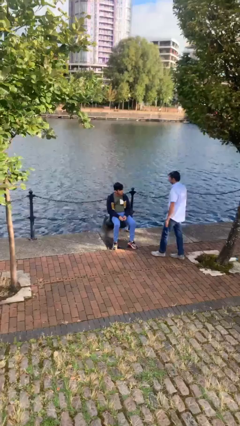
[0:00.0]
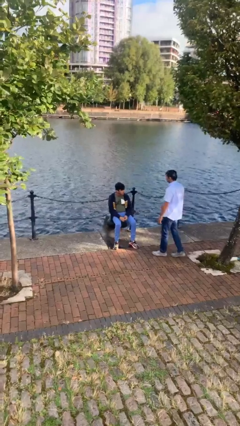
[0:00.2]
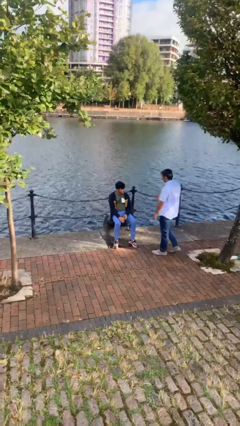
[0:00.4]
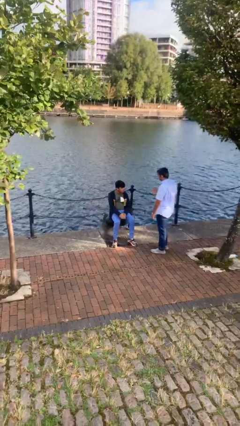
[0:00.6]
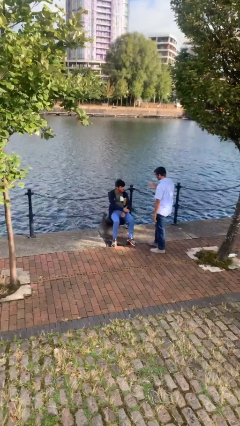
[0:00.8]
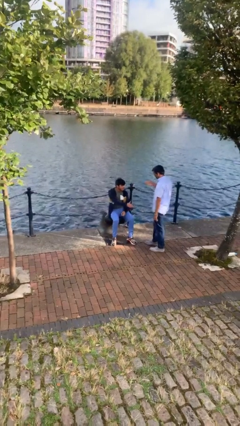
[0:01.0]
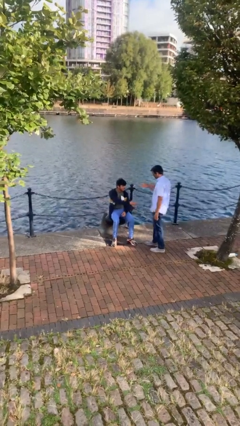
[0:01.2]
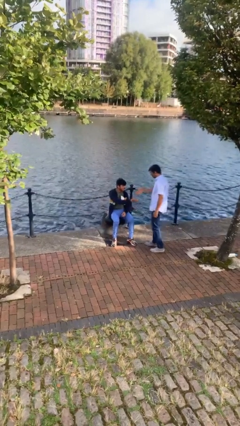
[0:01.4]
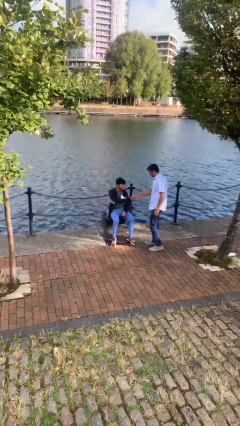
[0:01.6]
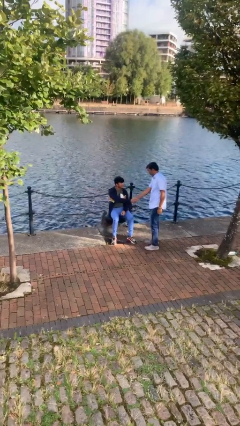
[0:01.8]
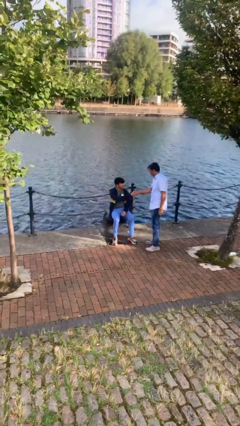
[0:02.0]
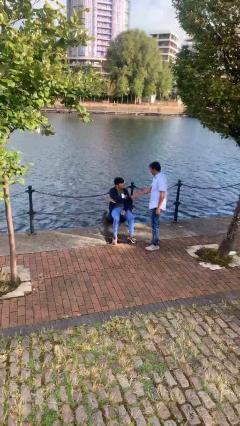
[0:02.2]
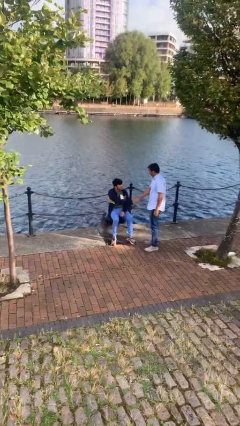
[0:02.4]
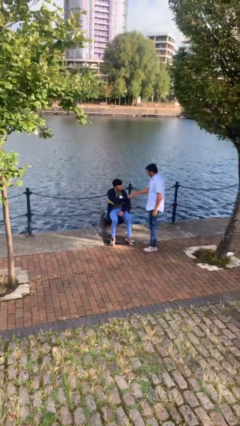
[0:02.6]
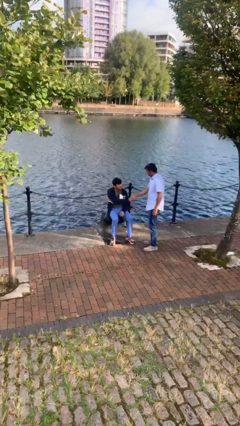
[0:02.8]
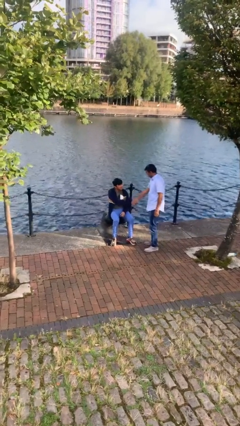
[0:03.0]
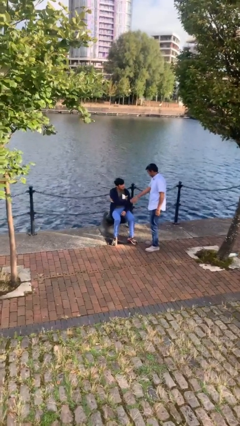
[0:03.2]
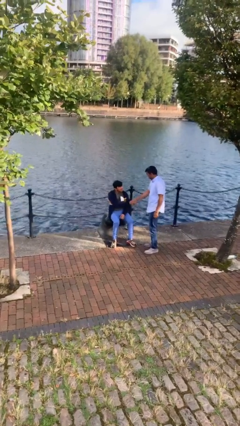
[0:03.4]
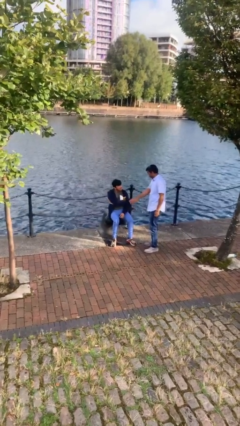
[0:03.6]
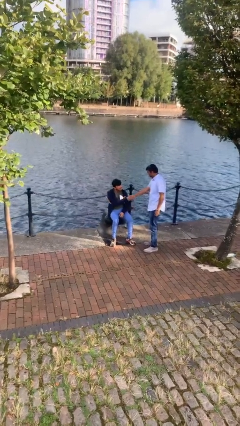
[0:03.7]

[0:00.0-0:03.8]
person shakes hand

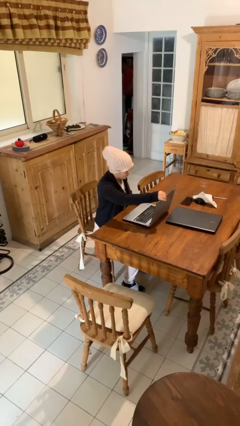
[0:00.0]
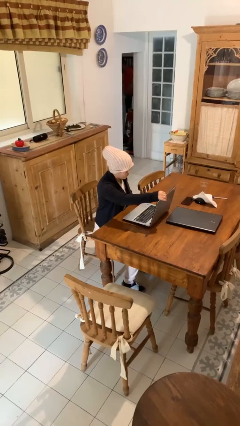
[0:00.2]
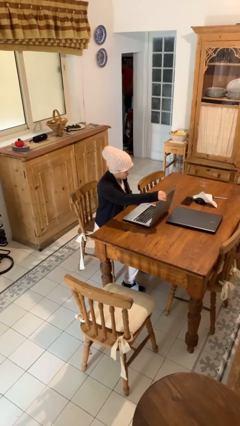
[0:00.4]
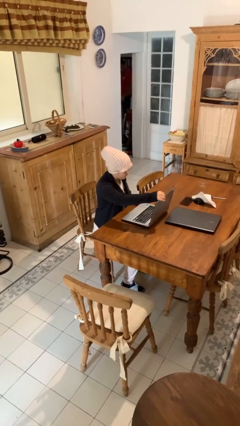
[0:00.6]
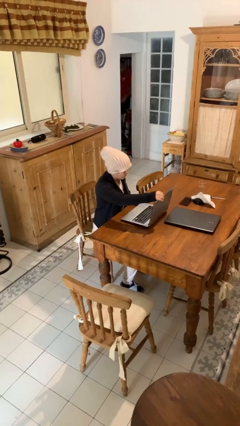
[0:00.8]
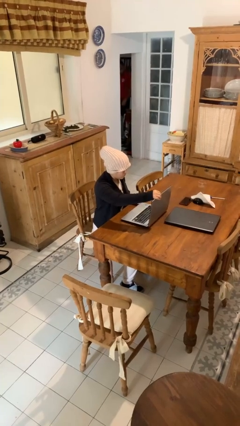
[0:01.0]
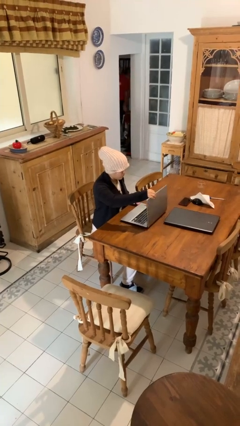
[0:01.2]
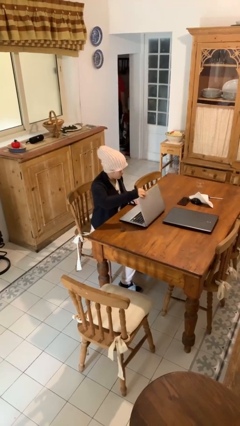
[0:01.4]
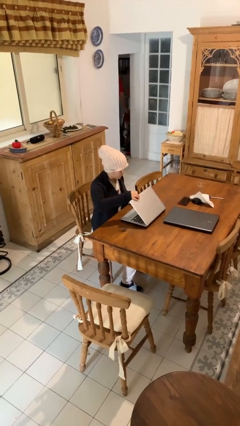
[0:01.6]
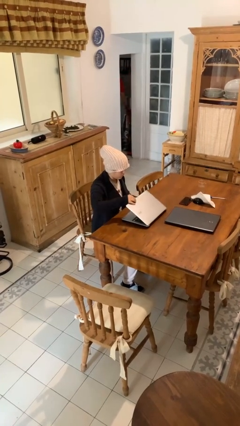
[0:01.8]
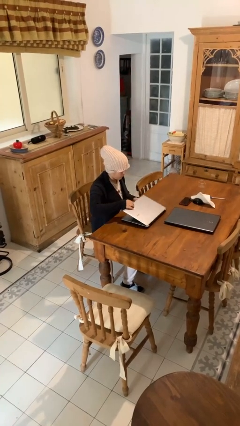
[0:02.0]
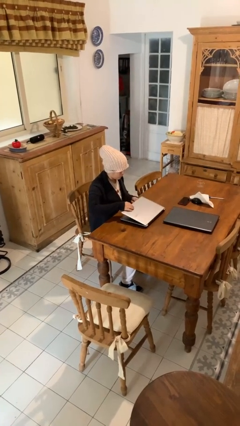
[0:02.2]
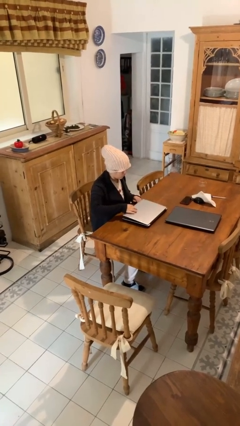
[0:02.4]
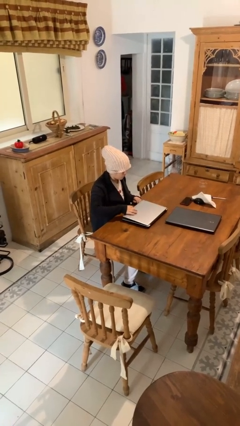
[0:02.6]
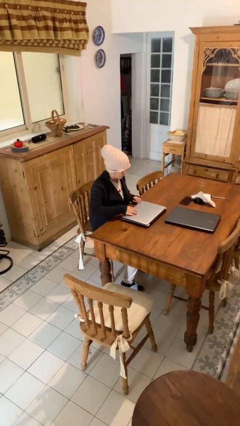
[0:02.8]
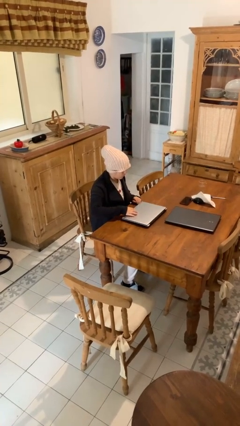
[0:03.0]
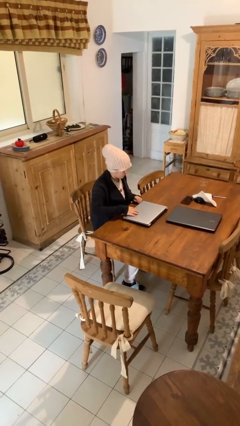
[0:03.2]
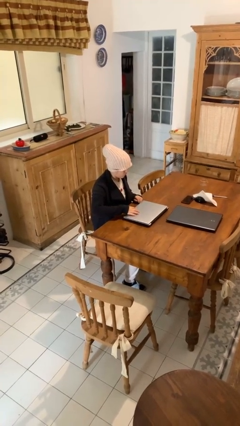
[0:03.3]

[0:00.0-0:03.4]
person closes laptop

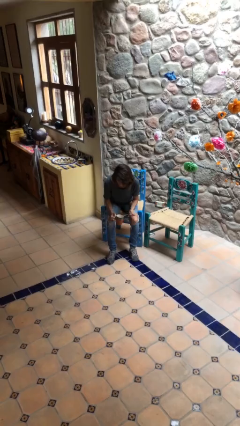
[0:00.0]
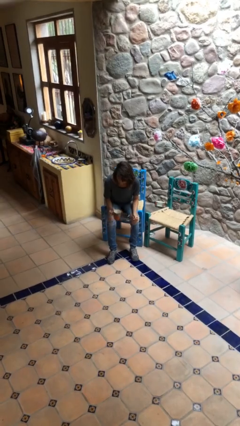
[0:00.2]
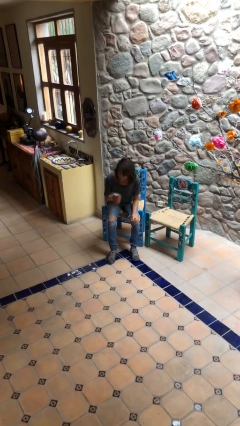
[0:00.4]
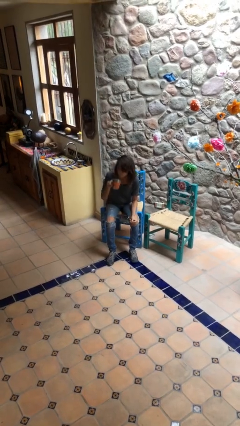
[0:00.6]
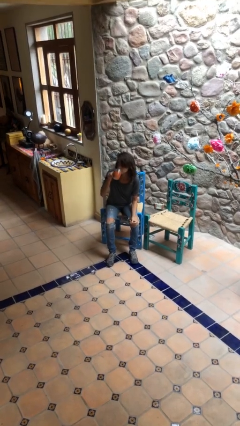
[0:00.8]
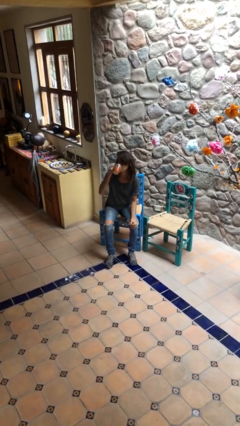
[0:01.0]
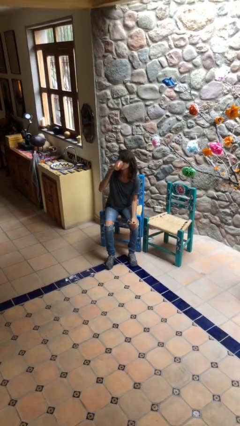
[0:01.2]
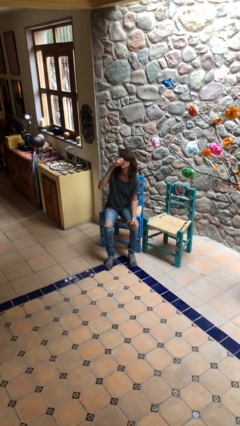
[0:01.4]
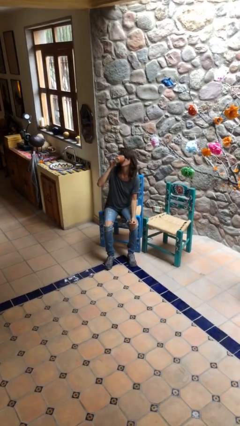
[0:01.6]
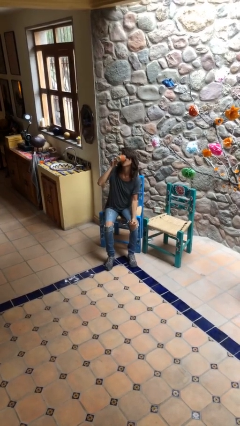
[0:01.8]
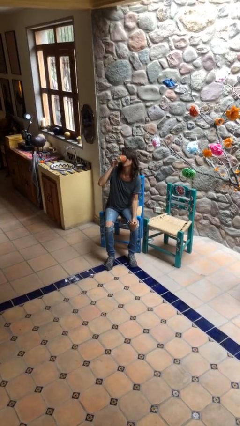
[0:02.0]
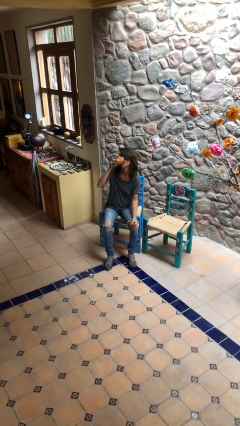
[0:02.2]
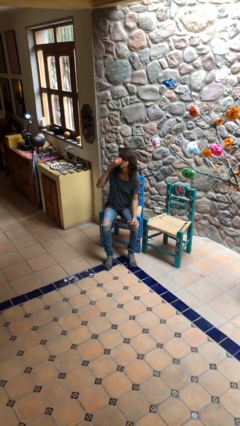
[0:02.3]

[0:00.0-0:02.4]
person drinks from mug

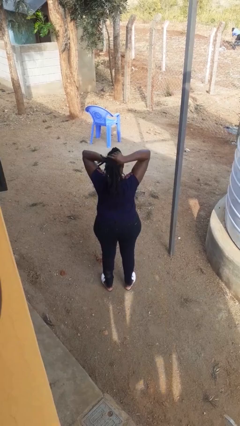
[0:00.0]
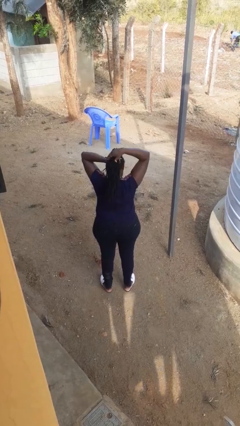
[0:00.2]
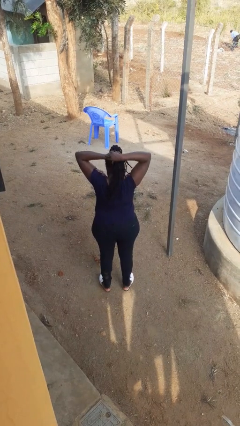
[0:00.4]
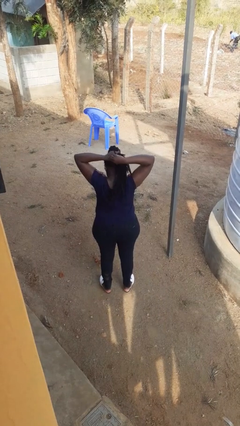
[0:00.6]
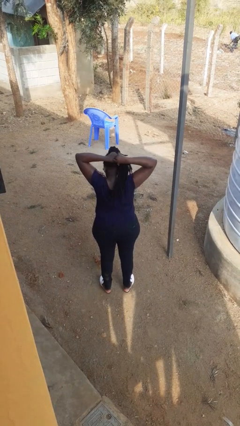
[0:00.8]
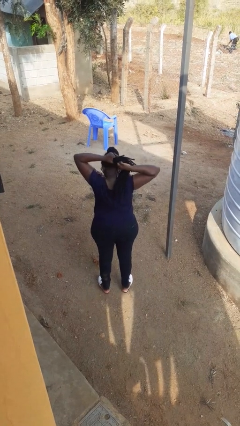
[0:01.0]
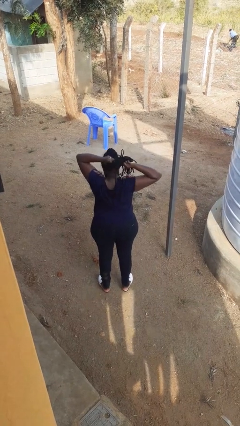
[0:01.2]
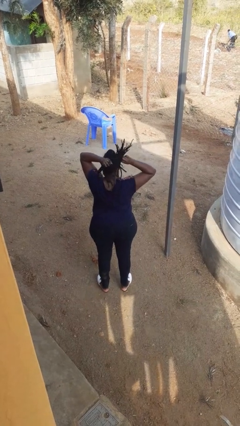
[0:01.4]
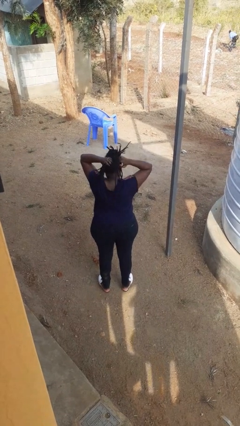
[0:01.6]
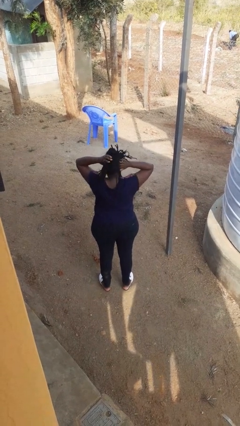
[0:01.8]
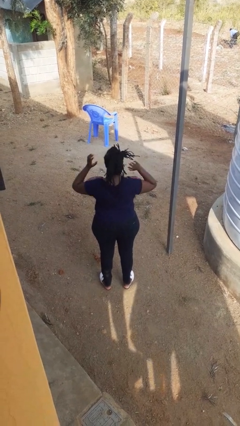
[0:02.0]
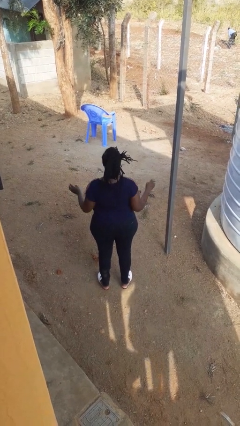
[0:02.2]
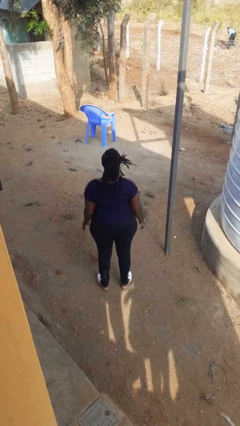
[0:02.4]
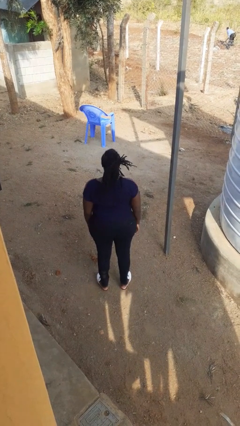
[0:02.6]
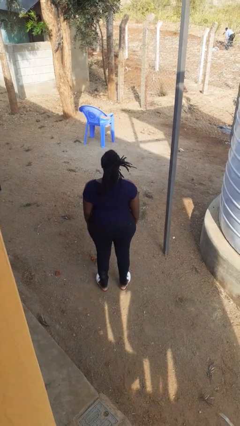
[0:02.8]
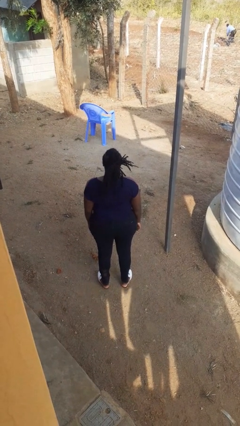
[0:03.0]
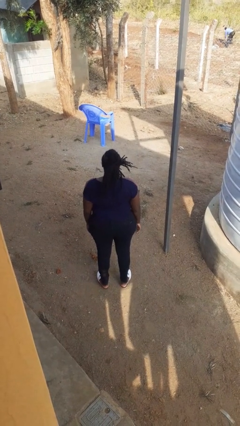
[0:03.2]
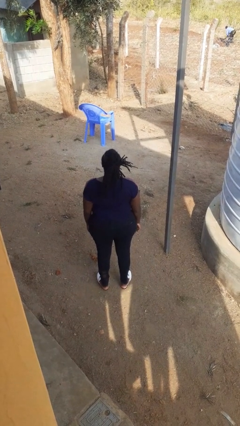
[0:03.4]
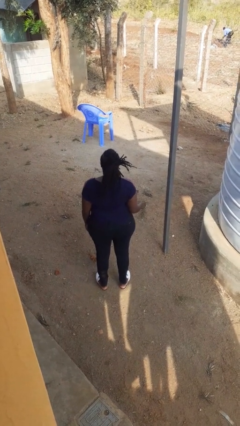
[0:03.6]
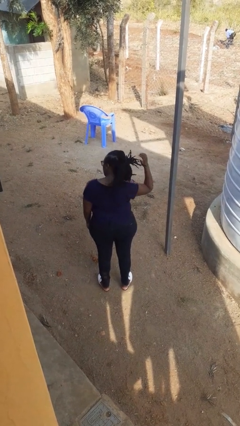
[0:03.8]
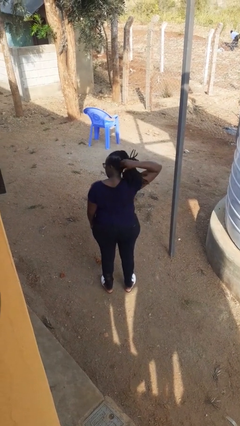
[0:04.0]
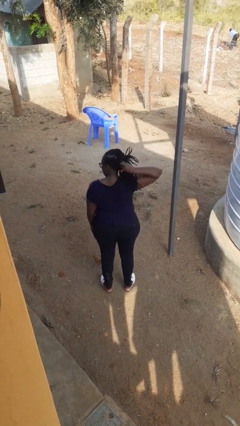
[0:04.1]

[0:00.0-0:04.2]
person puts hair in ponytail

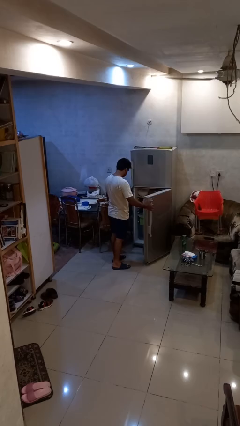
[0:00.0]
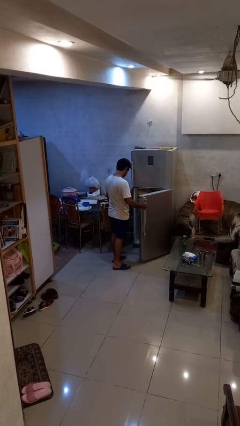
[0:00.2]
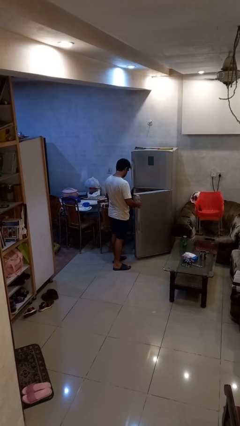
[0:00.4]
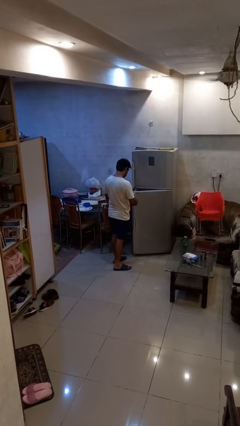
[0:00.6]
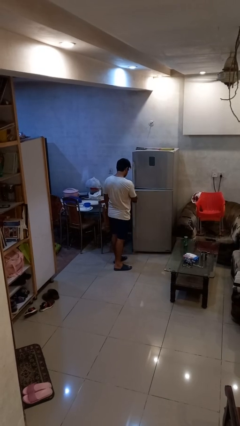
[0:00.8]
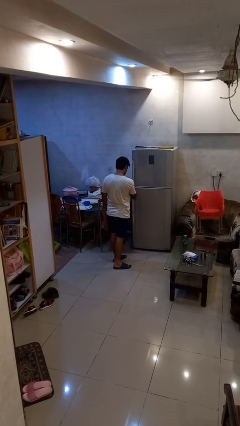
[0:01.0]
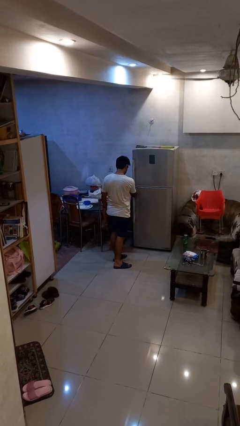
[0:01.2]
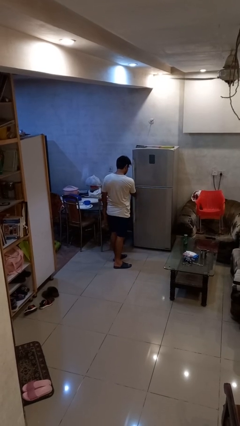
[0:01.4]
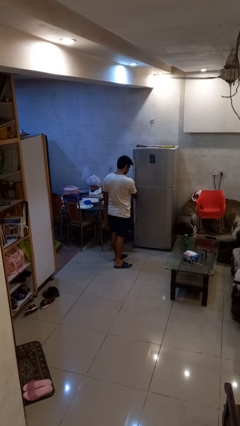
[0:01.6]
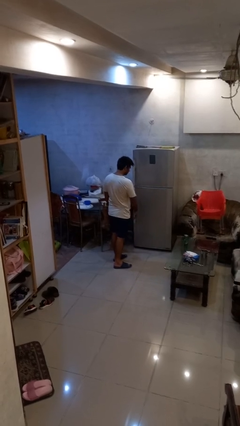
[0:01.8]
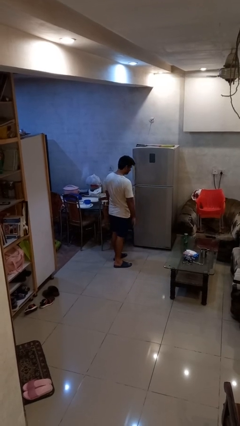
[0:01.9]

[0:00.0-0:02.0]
person closes refrigerator

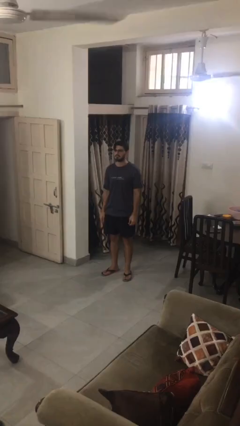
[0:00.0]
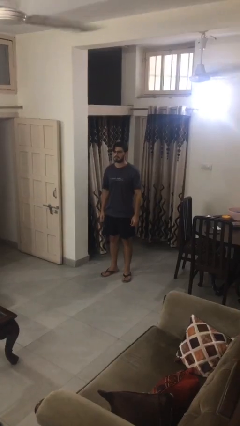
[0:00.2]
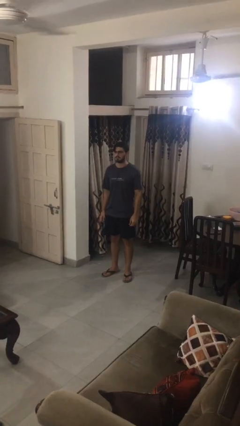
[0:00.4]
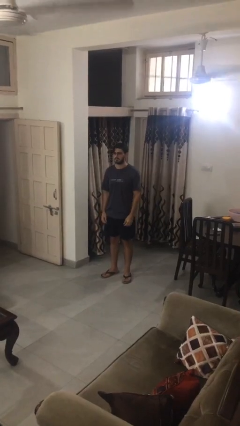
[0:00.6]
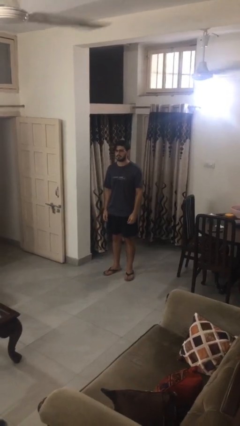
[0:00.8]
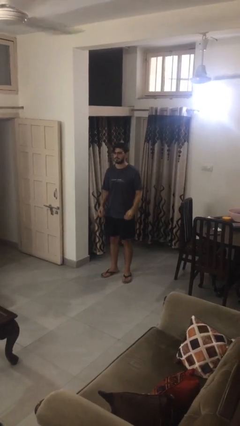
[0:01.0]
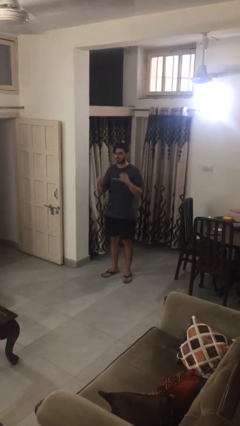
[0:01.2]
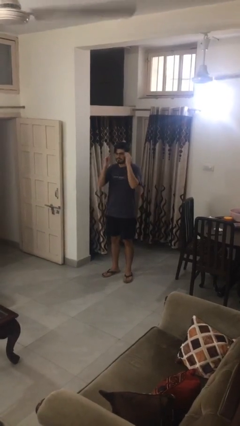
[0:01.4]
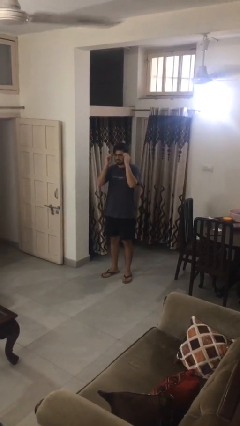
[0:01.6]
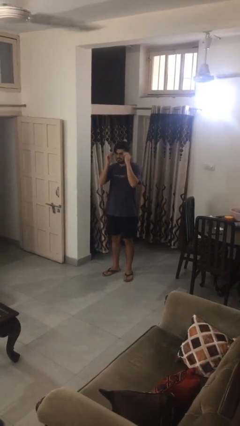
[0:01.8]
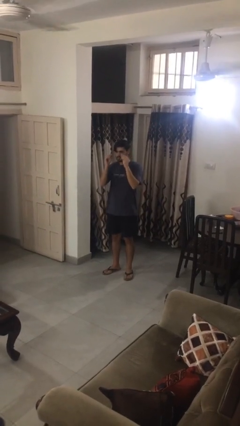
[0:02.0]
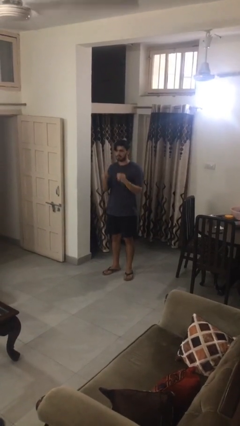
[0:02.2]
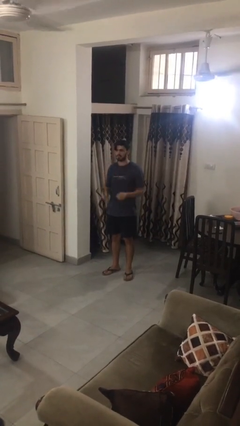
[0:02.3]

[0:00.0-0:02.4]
person takes off glasses
